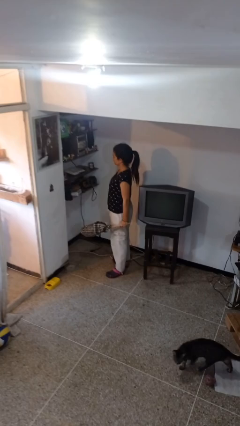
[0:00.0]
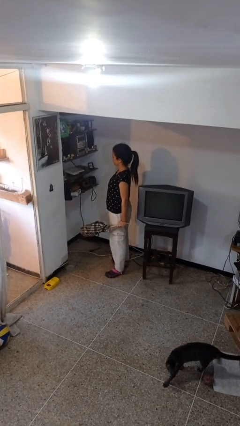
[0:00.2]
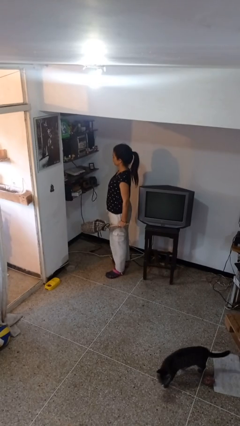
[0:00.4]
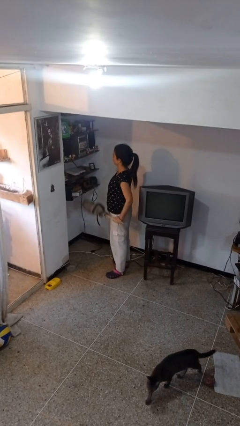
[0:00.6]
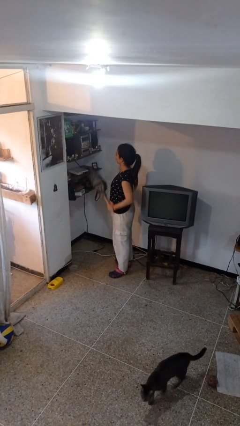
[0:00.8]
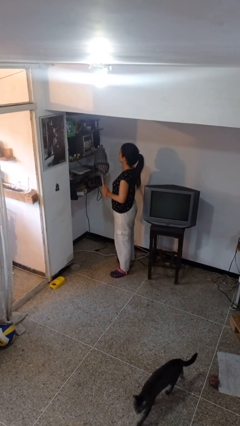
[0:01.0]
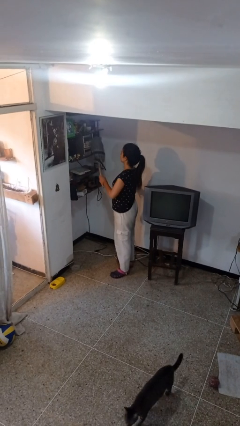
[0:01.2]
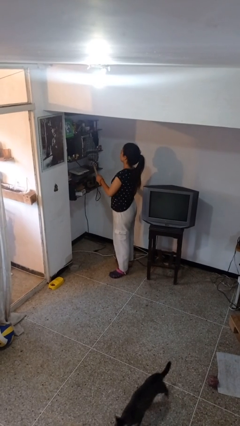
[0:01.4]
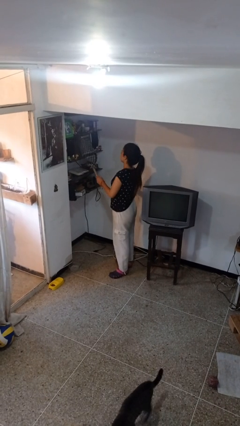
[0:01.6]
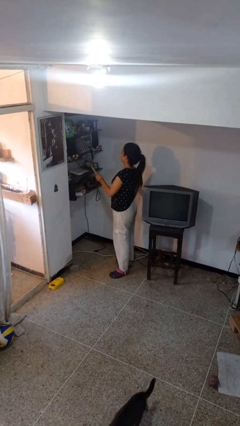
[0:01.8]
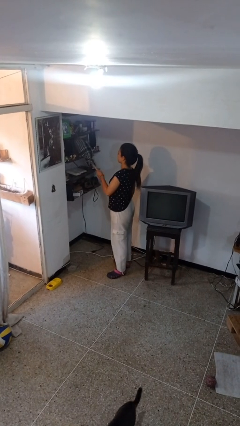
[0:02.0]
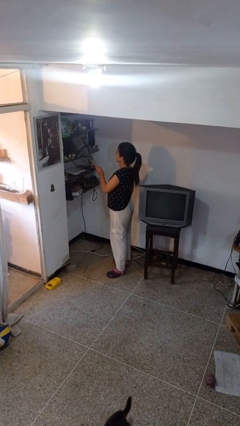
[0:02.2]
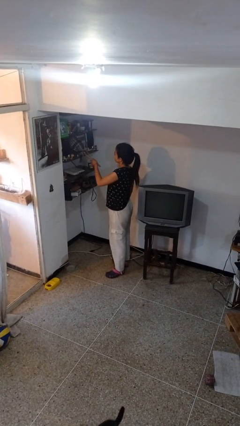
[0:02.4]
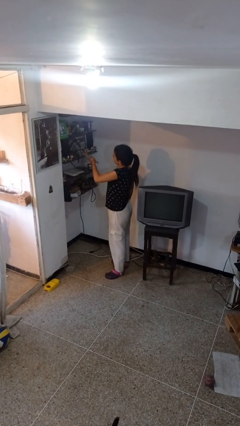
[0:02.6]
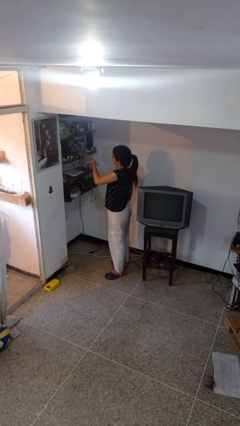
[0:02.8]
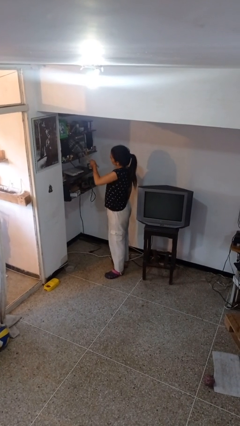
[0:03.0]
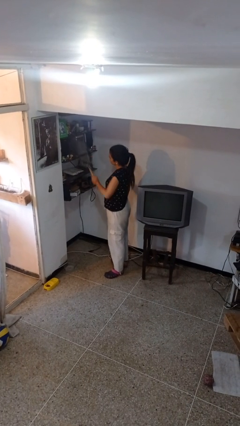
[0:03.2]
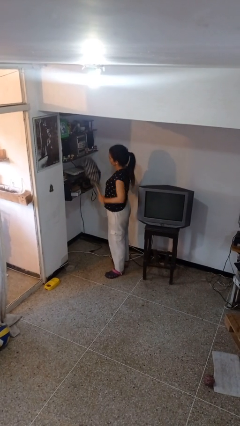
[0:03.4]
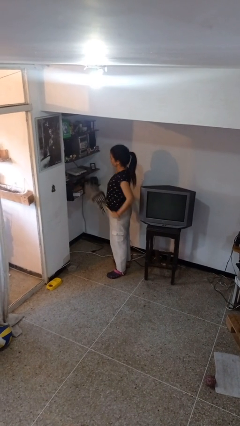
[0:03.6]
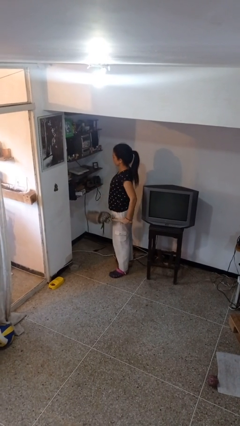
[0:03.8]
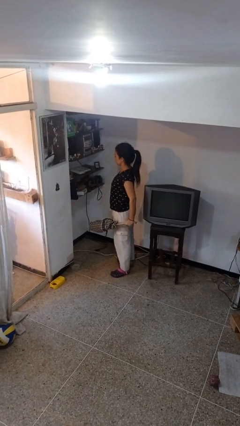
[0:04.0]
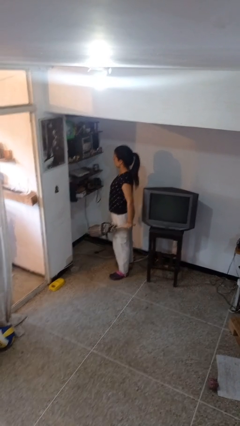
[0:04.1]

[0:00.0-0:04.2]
person dusts furniture

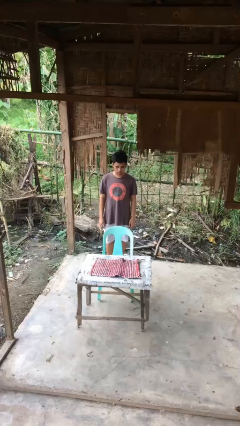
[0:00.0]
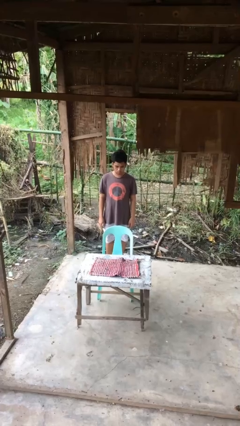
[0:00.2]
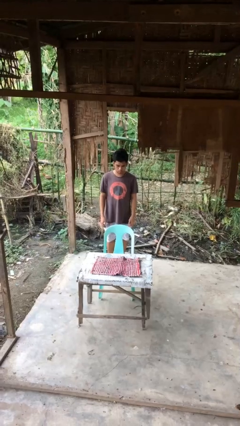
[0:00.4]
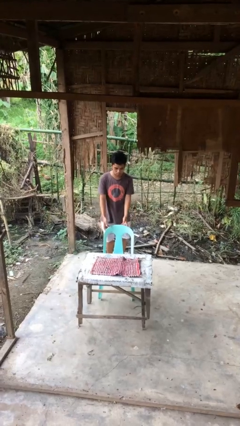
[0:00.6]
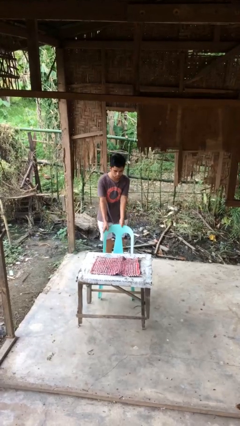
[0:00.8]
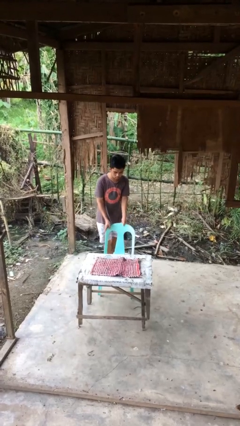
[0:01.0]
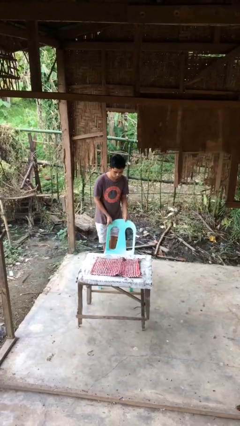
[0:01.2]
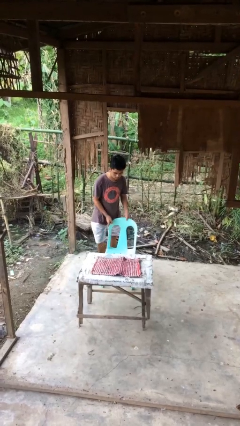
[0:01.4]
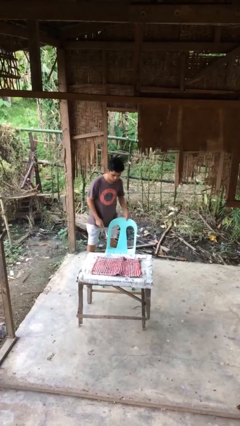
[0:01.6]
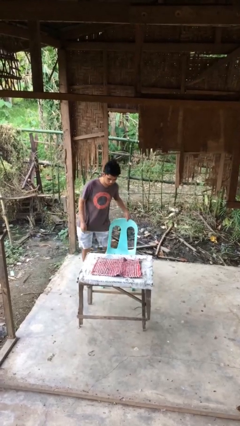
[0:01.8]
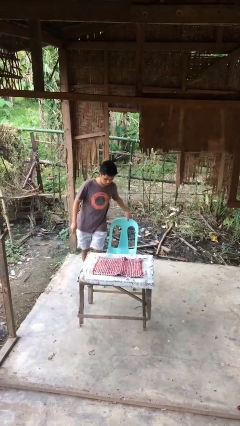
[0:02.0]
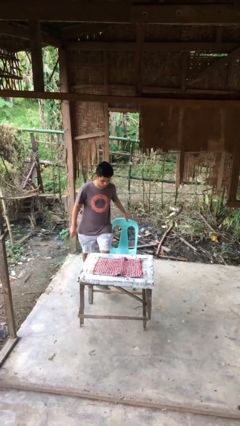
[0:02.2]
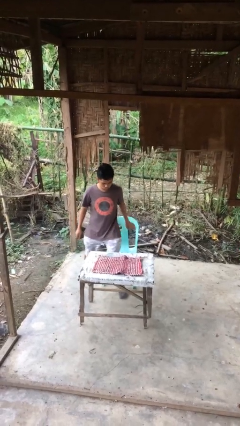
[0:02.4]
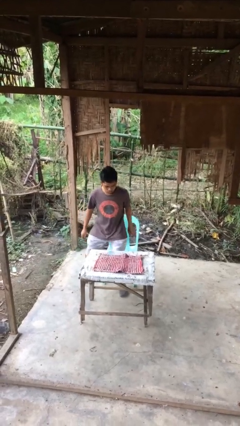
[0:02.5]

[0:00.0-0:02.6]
person stands up

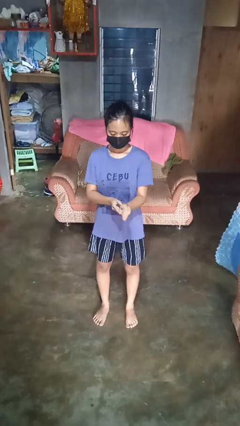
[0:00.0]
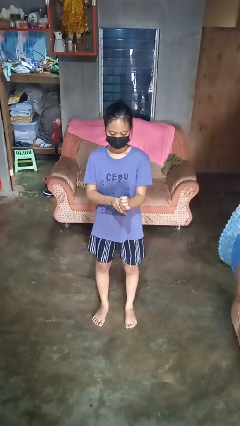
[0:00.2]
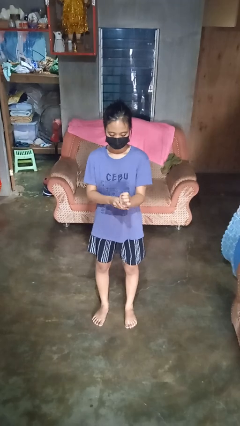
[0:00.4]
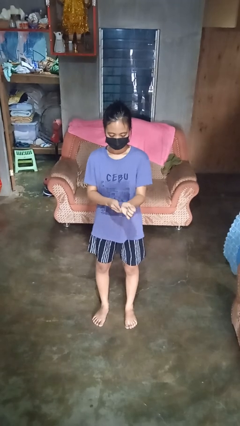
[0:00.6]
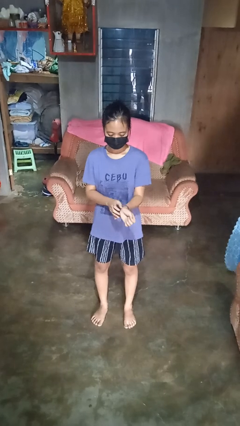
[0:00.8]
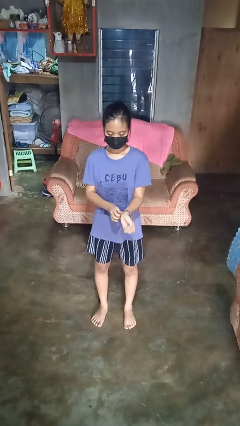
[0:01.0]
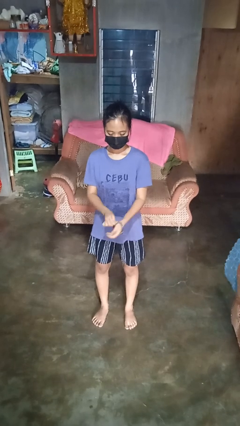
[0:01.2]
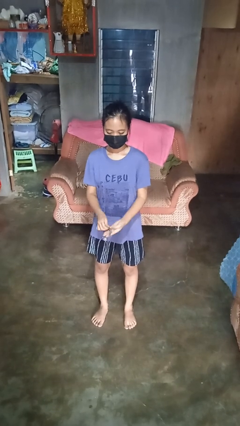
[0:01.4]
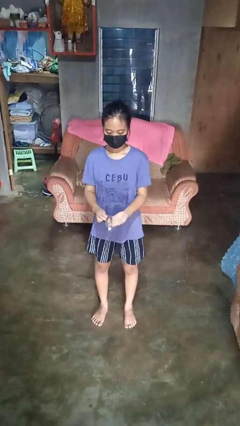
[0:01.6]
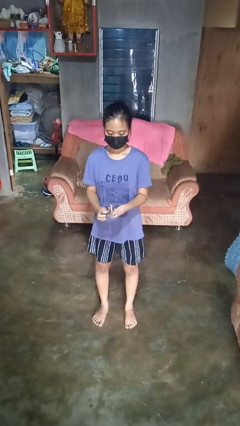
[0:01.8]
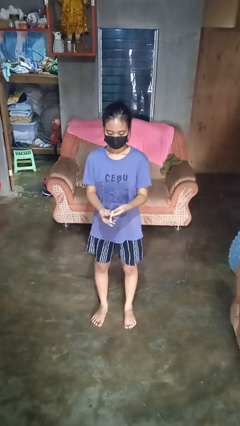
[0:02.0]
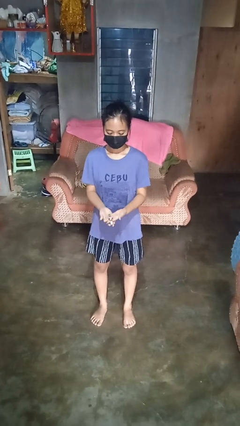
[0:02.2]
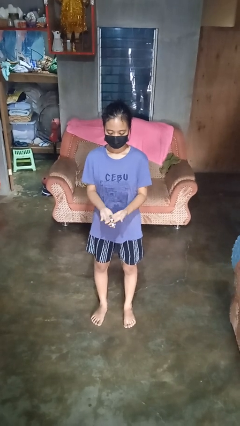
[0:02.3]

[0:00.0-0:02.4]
person takes off wristwatch

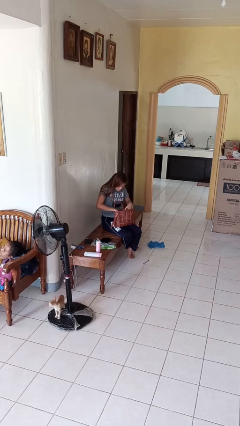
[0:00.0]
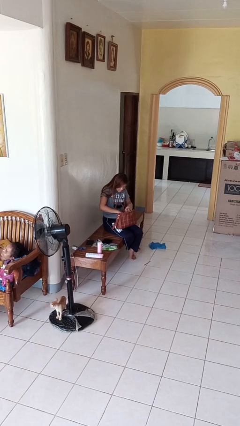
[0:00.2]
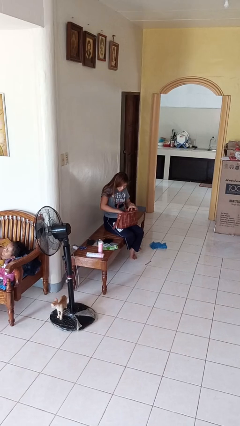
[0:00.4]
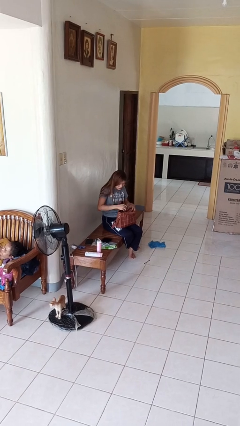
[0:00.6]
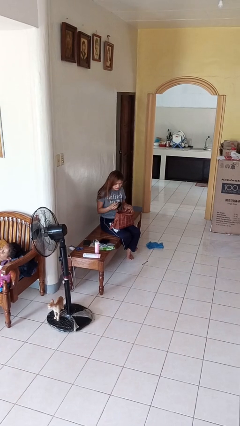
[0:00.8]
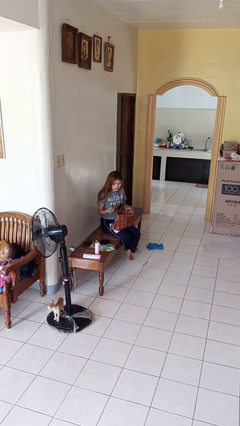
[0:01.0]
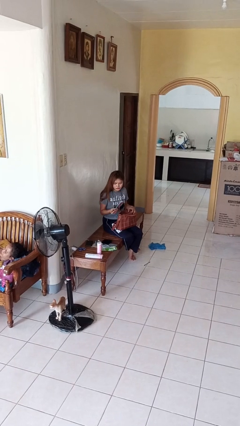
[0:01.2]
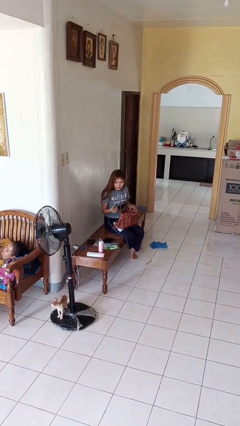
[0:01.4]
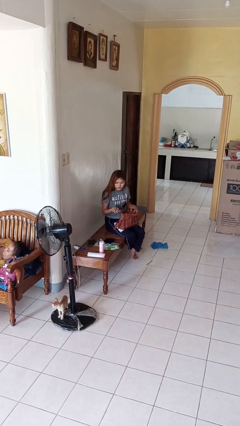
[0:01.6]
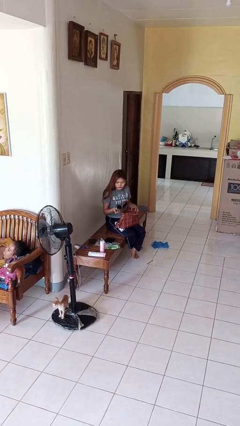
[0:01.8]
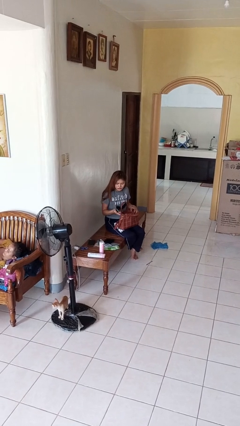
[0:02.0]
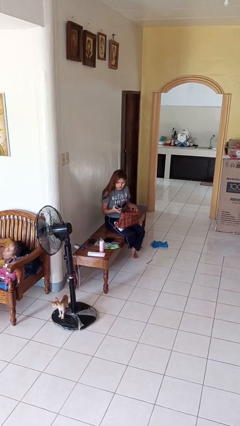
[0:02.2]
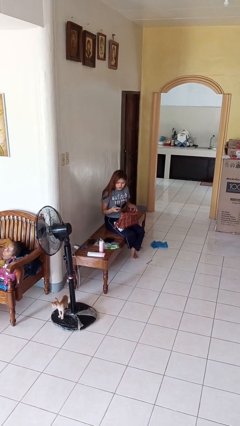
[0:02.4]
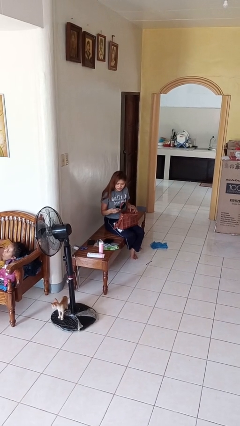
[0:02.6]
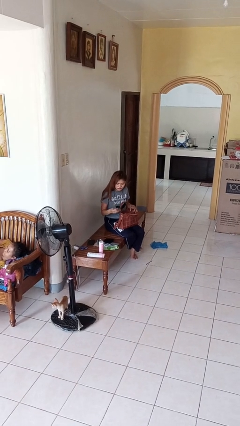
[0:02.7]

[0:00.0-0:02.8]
person takes object from purse

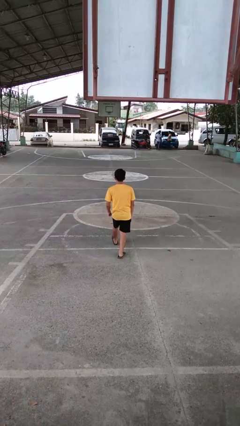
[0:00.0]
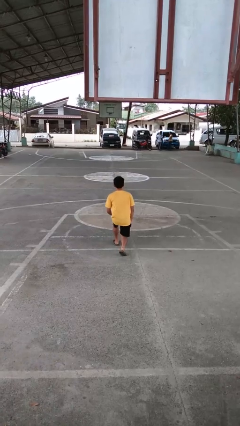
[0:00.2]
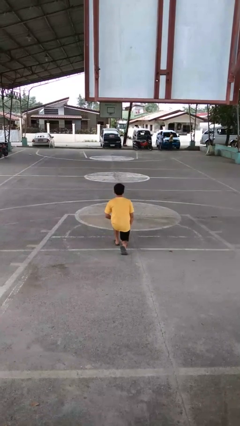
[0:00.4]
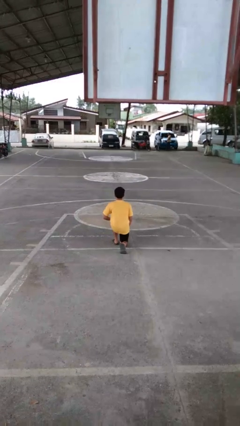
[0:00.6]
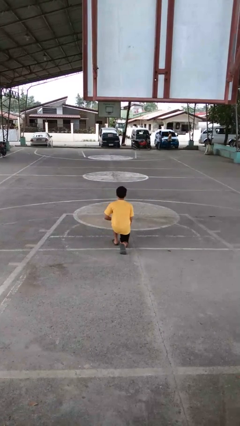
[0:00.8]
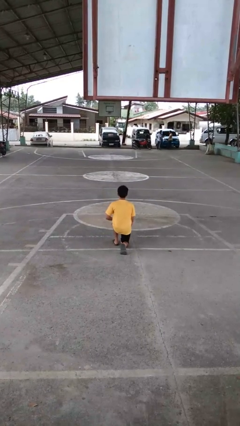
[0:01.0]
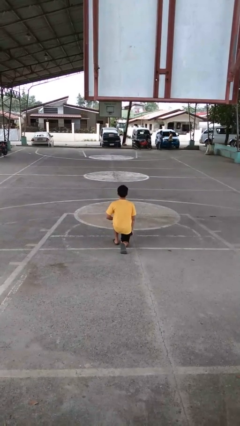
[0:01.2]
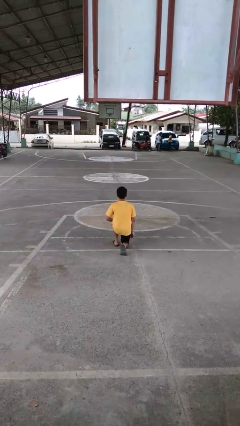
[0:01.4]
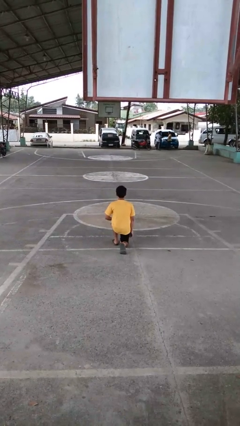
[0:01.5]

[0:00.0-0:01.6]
person kneels

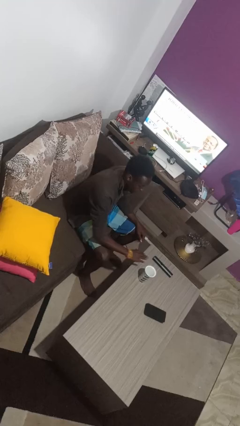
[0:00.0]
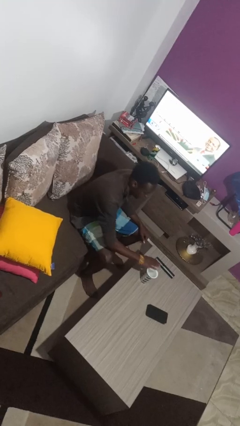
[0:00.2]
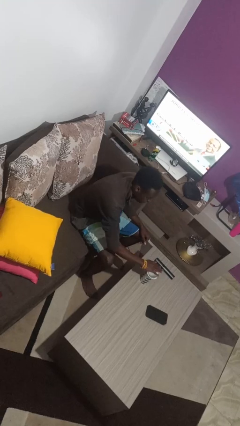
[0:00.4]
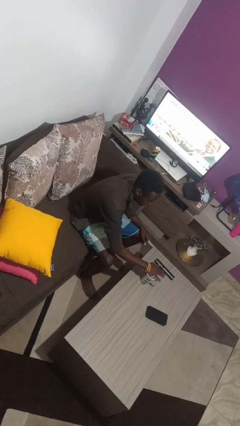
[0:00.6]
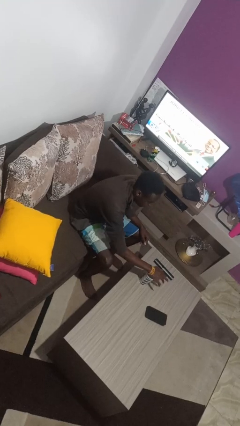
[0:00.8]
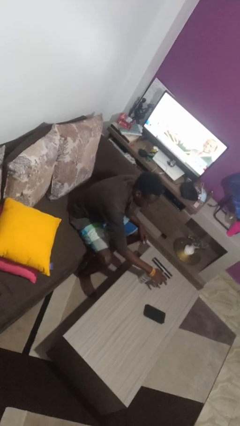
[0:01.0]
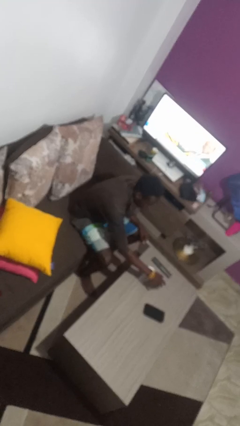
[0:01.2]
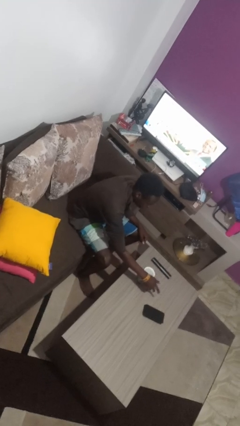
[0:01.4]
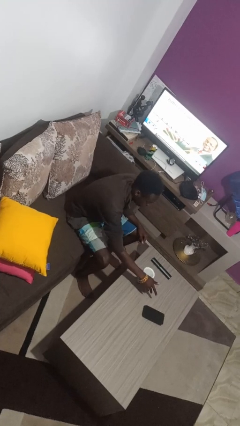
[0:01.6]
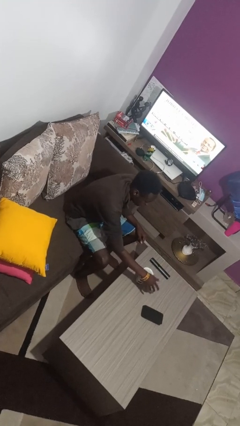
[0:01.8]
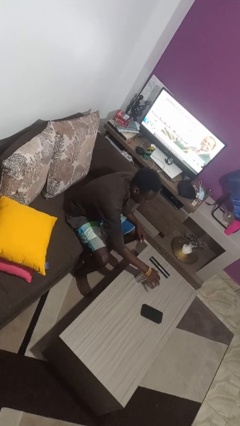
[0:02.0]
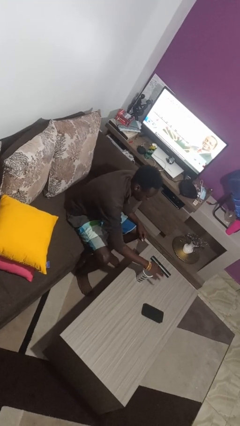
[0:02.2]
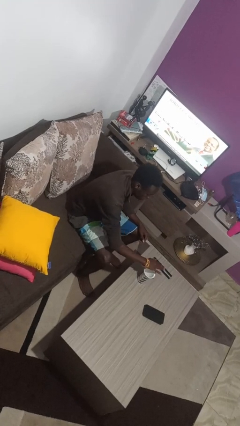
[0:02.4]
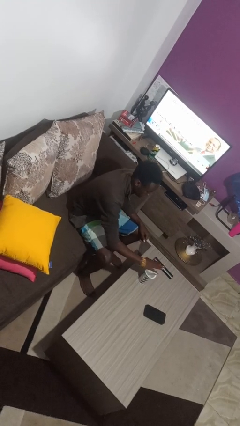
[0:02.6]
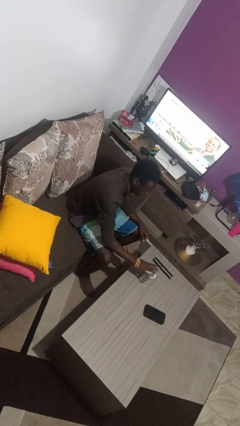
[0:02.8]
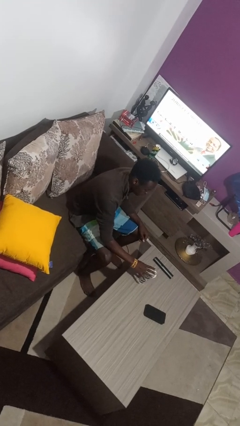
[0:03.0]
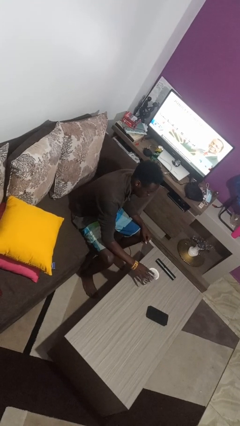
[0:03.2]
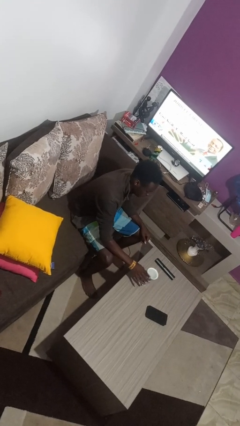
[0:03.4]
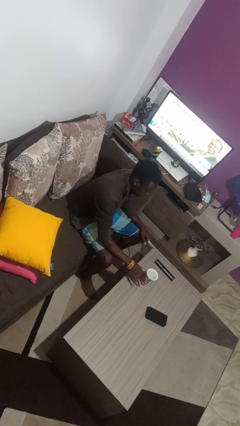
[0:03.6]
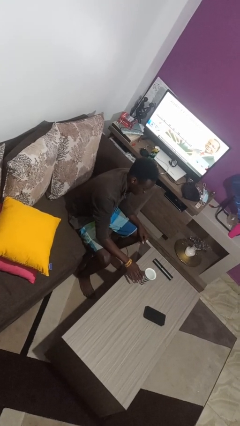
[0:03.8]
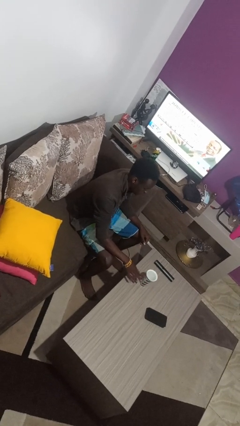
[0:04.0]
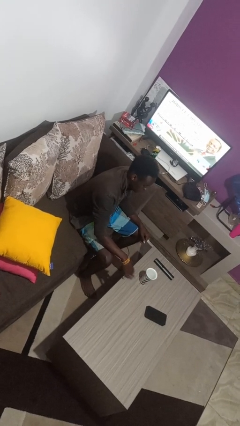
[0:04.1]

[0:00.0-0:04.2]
person waves hand over object
